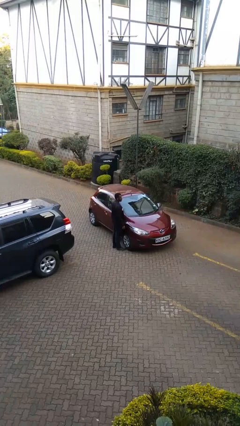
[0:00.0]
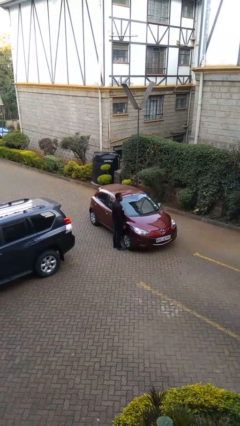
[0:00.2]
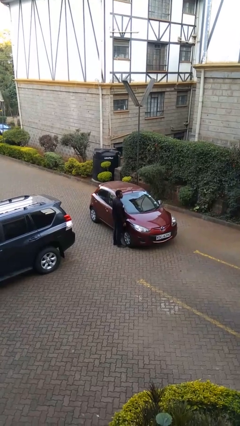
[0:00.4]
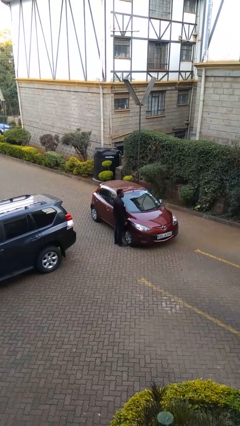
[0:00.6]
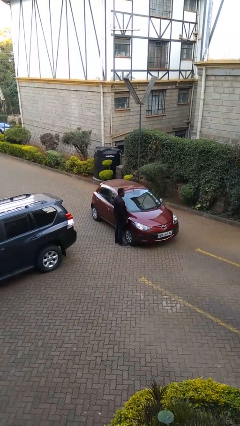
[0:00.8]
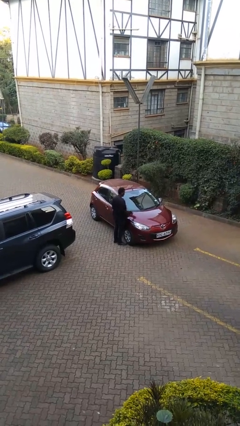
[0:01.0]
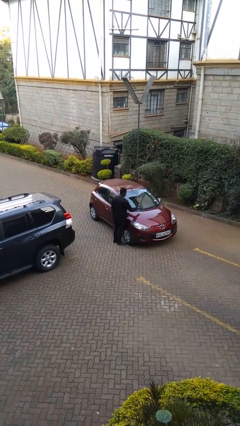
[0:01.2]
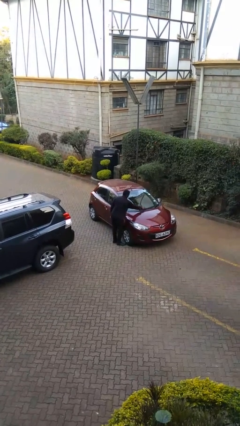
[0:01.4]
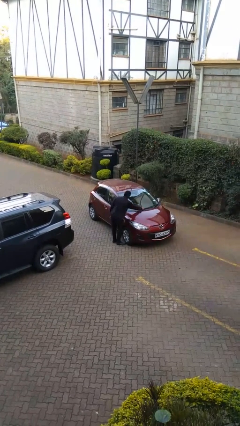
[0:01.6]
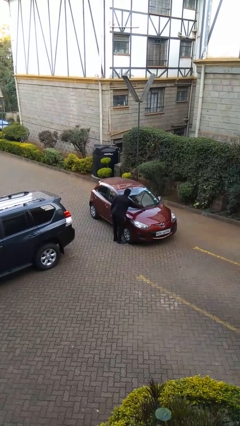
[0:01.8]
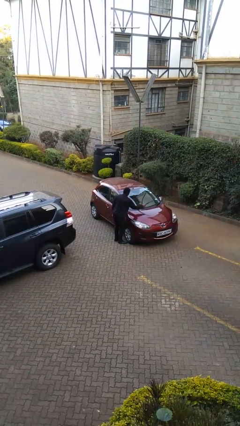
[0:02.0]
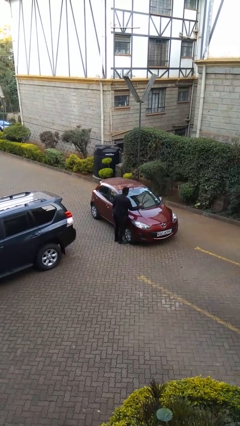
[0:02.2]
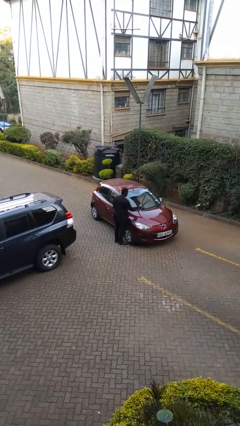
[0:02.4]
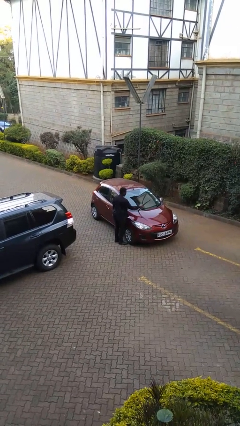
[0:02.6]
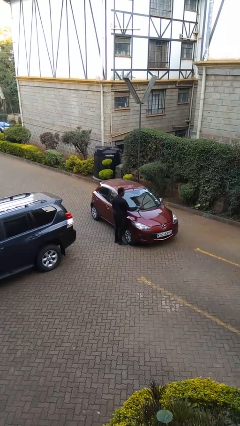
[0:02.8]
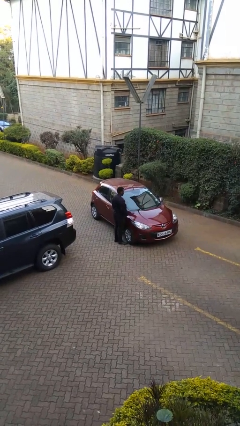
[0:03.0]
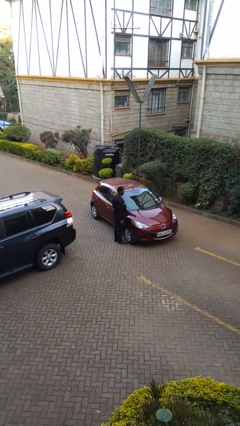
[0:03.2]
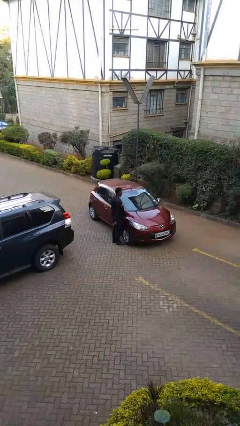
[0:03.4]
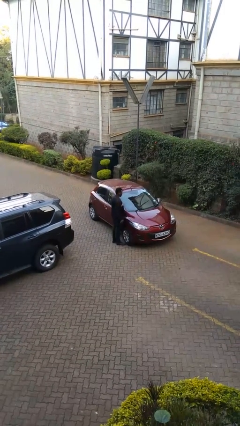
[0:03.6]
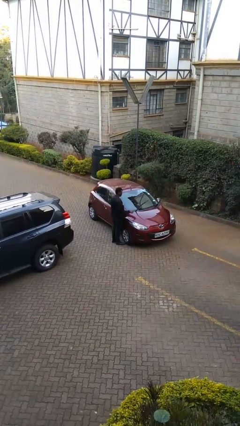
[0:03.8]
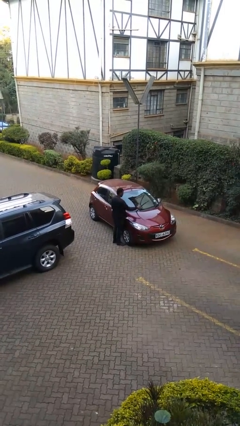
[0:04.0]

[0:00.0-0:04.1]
person flips up car wipers

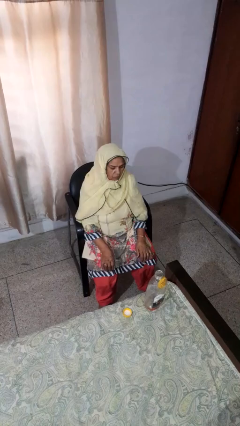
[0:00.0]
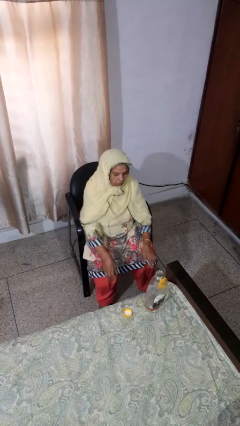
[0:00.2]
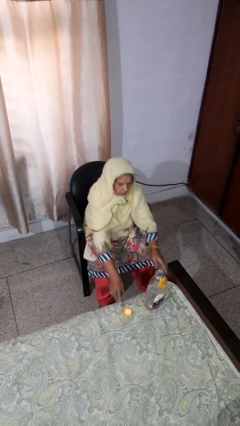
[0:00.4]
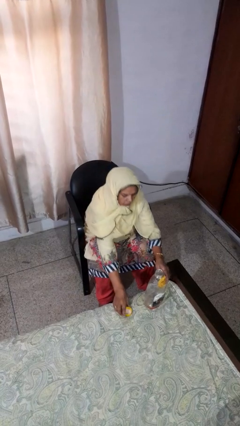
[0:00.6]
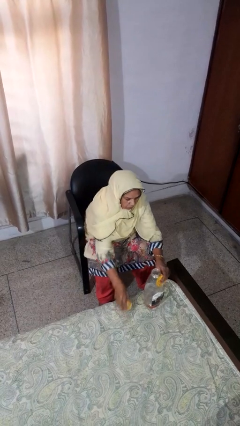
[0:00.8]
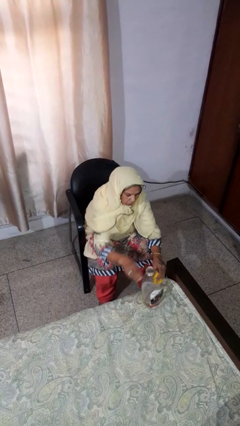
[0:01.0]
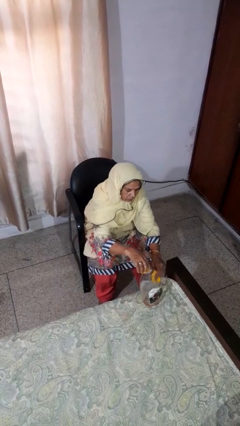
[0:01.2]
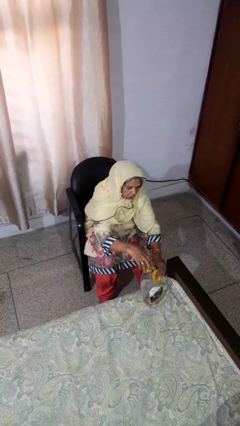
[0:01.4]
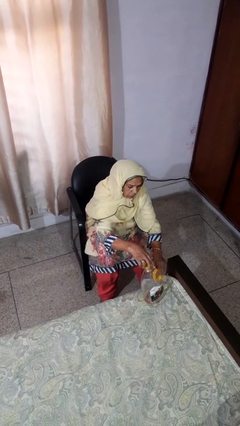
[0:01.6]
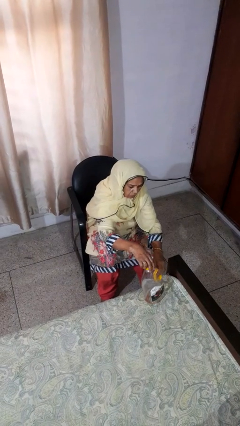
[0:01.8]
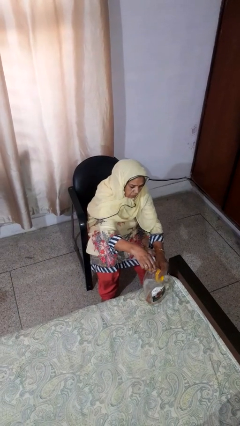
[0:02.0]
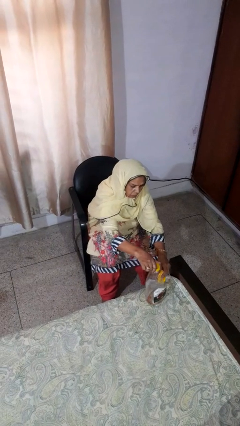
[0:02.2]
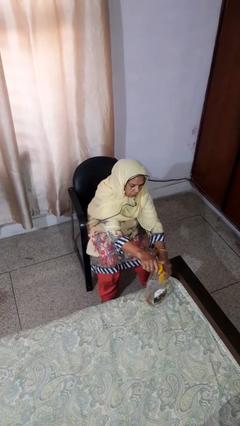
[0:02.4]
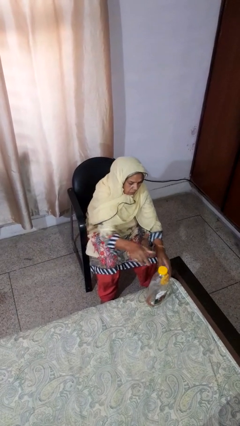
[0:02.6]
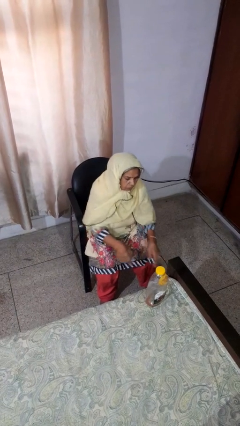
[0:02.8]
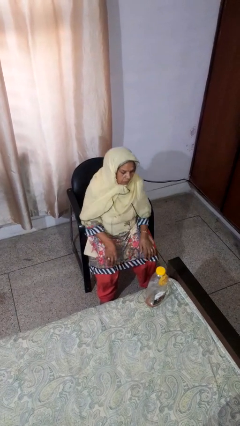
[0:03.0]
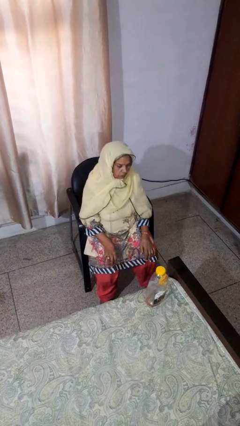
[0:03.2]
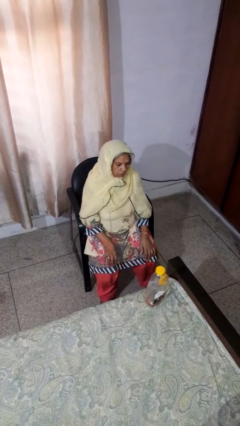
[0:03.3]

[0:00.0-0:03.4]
person screws lid to bottle

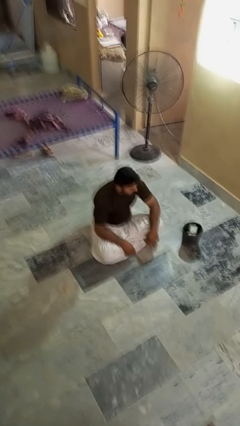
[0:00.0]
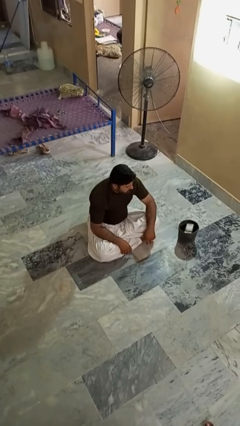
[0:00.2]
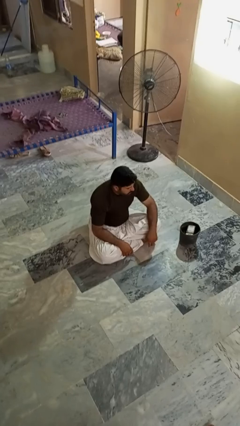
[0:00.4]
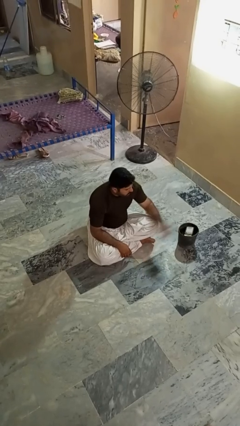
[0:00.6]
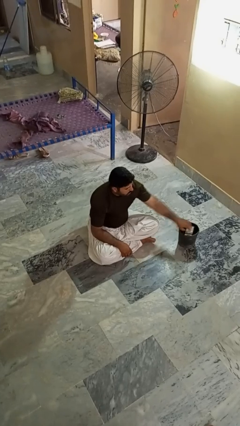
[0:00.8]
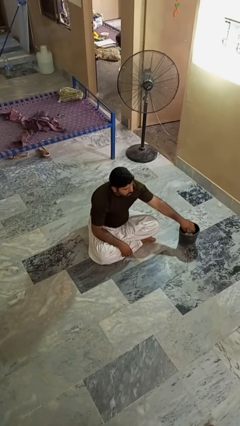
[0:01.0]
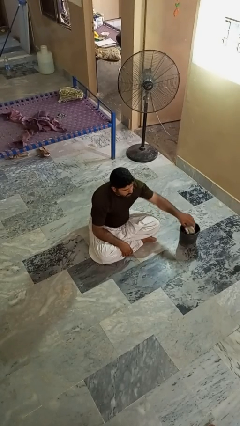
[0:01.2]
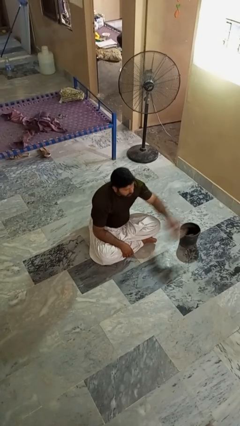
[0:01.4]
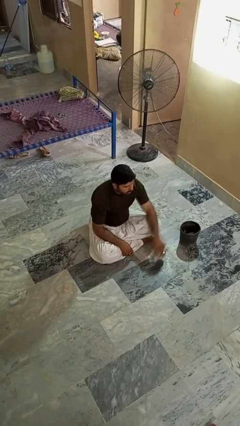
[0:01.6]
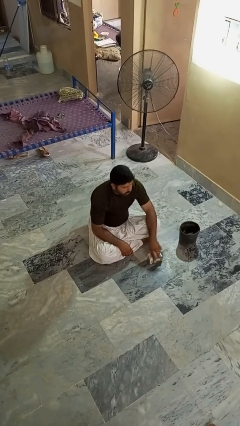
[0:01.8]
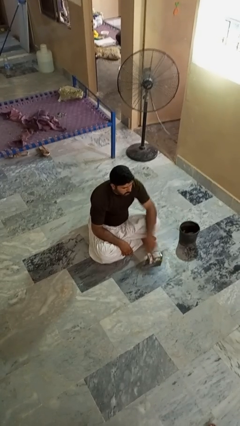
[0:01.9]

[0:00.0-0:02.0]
person takes object from basket

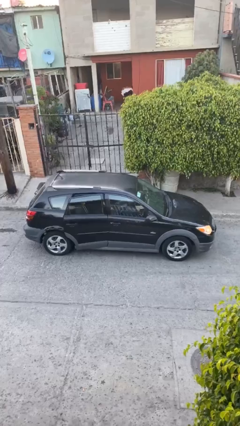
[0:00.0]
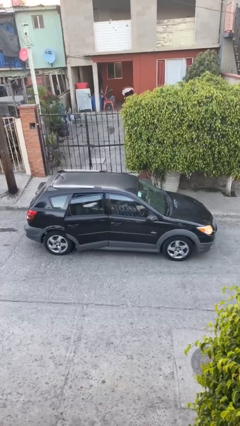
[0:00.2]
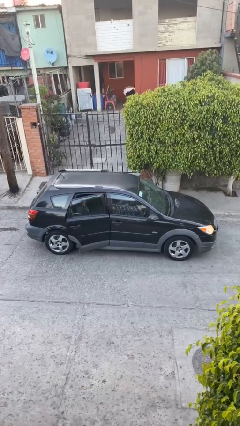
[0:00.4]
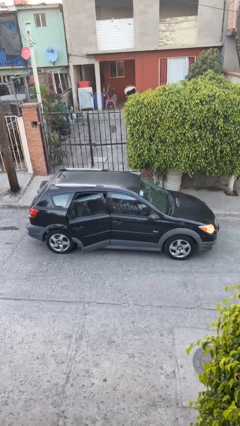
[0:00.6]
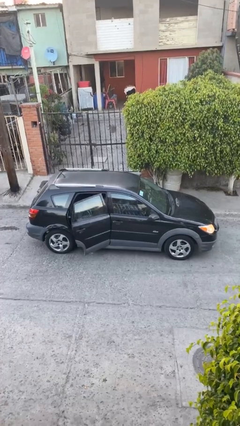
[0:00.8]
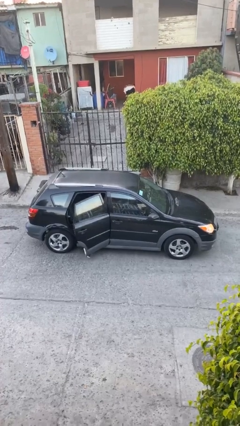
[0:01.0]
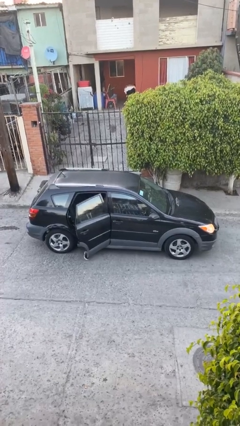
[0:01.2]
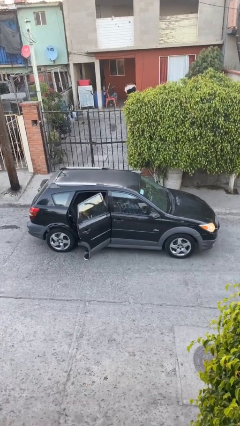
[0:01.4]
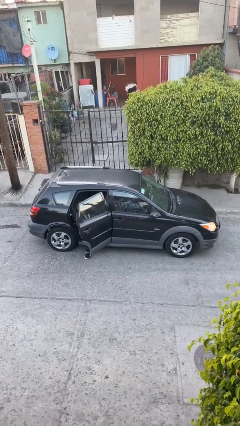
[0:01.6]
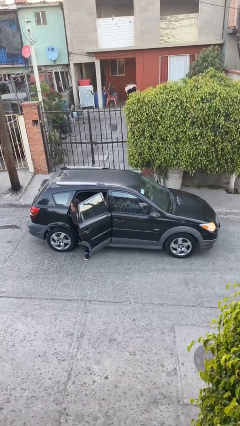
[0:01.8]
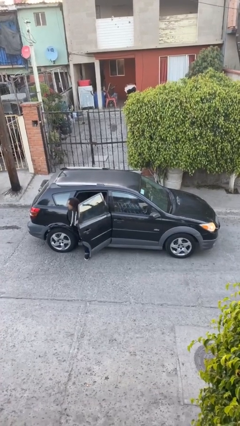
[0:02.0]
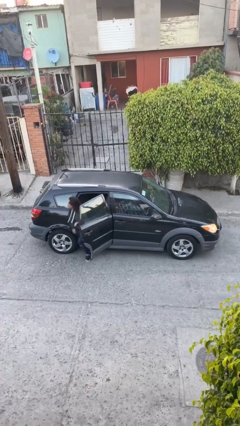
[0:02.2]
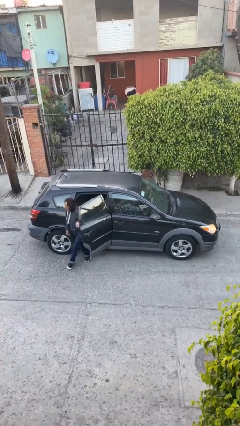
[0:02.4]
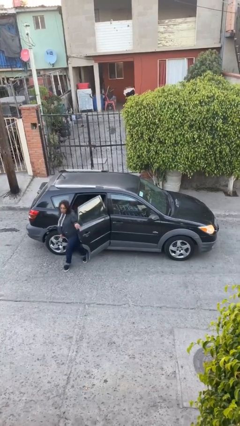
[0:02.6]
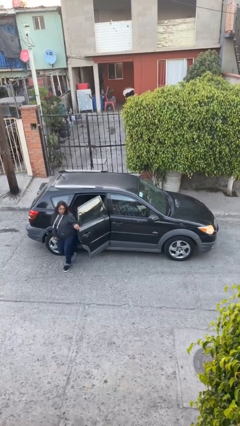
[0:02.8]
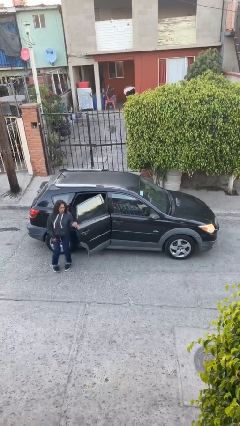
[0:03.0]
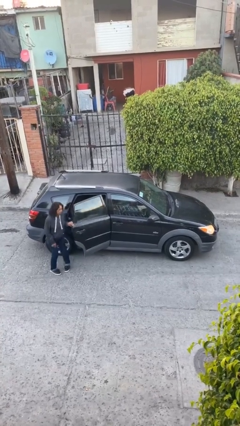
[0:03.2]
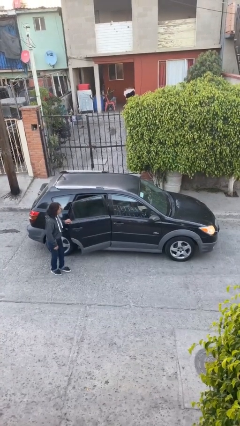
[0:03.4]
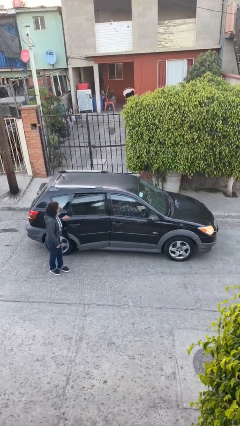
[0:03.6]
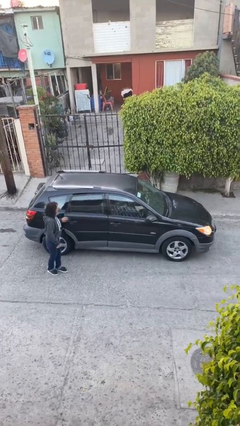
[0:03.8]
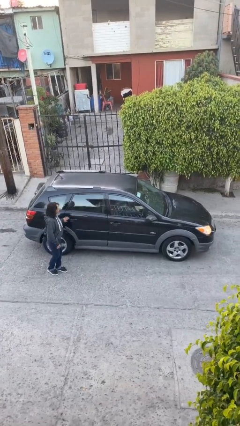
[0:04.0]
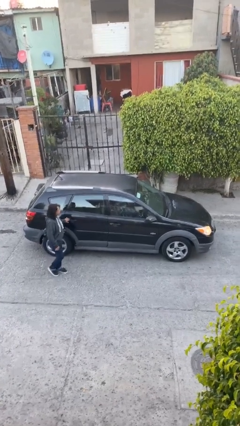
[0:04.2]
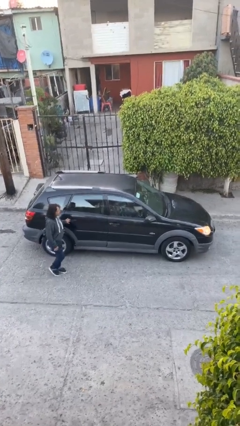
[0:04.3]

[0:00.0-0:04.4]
car drops off person

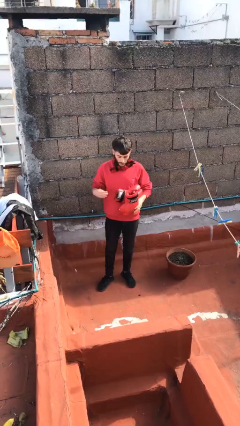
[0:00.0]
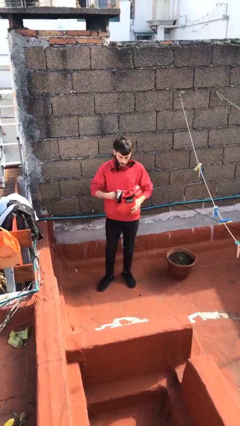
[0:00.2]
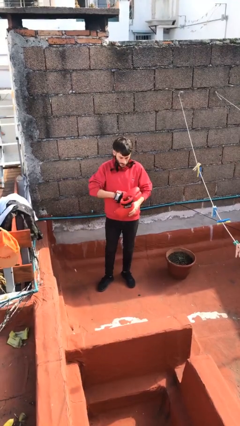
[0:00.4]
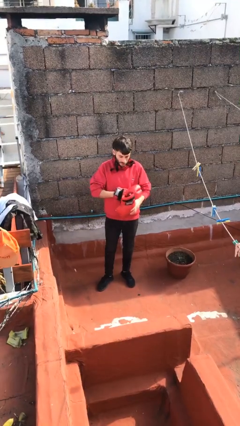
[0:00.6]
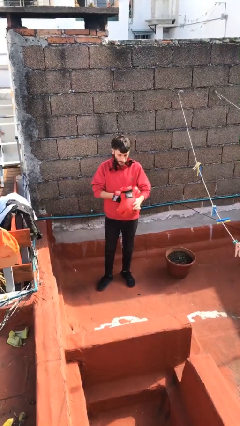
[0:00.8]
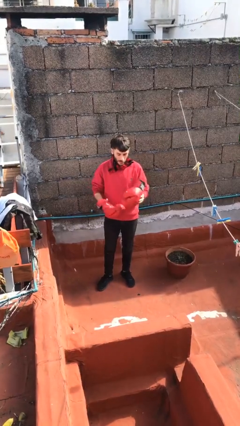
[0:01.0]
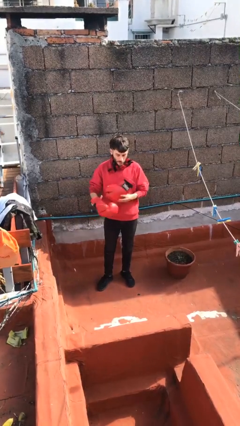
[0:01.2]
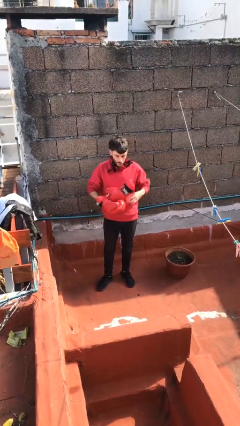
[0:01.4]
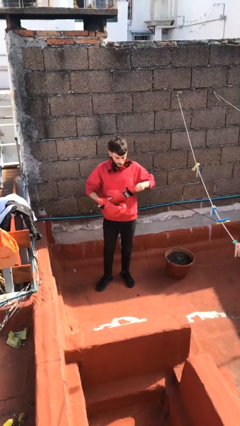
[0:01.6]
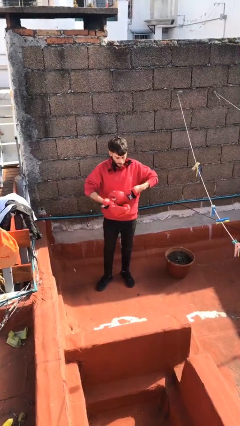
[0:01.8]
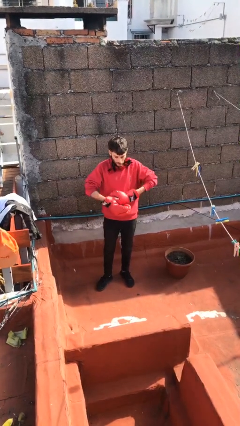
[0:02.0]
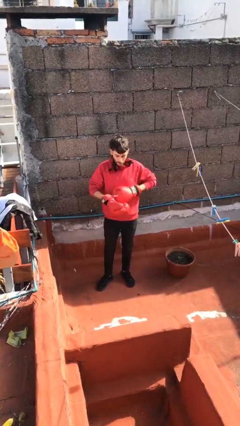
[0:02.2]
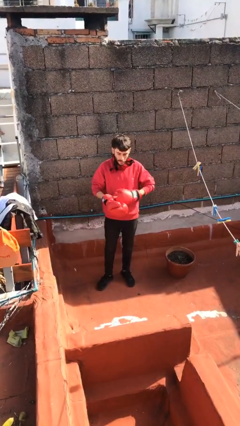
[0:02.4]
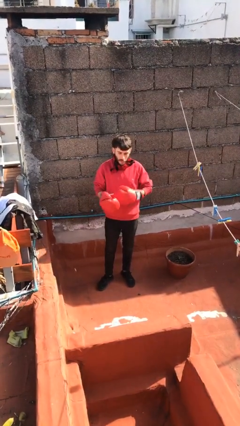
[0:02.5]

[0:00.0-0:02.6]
person puts on gloves

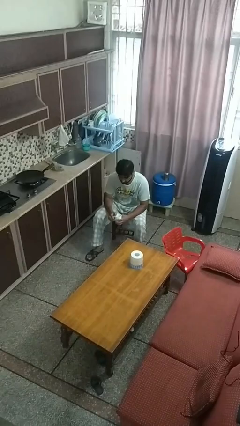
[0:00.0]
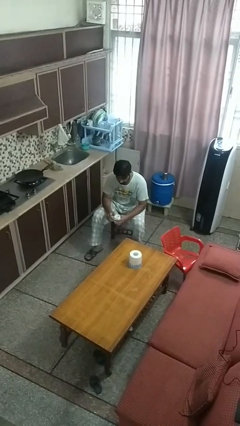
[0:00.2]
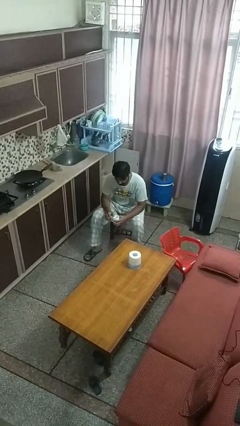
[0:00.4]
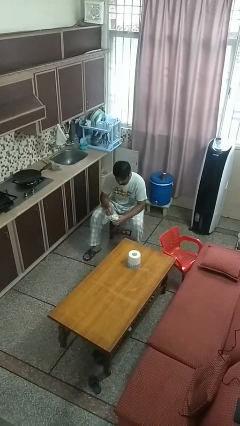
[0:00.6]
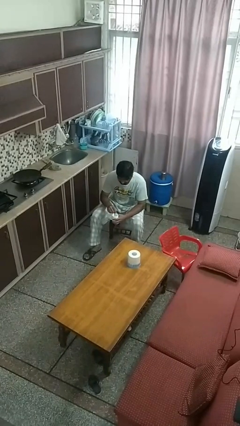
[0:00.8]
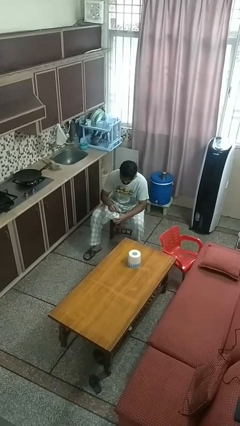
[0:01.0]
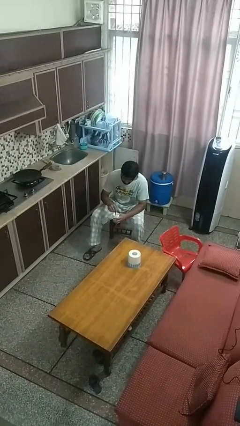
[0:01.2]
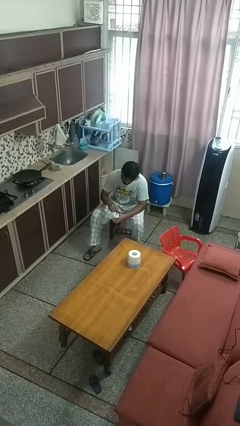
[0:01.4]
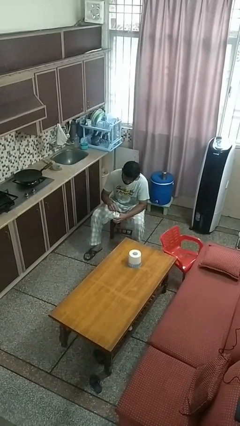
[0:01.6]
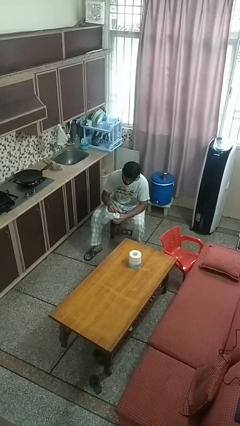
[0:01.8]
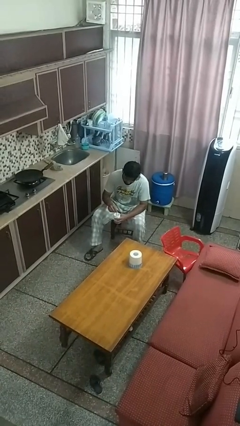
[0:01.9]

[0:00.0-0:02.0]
person stirs mug
